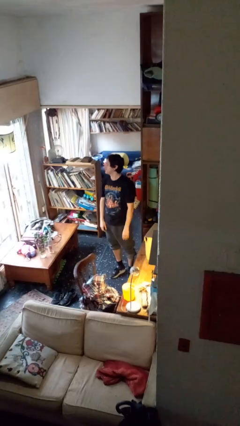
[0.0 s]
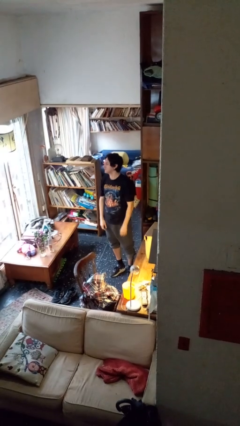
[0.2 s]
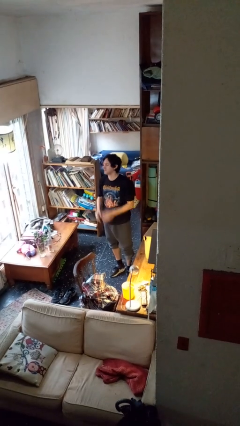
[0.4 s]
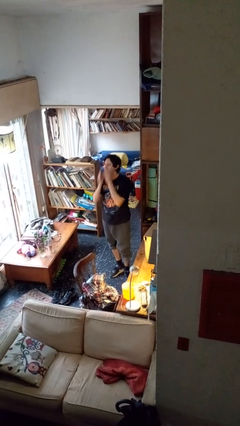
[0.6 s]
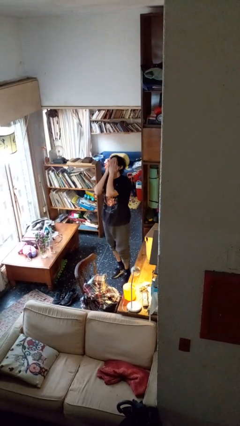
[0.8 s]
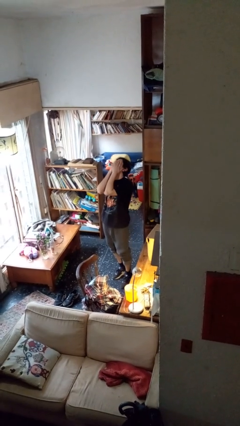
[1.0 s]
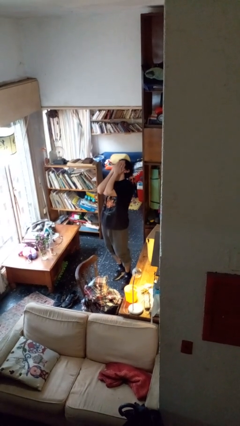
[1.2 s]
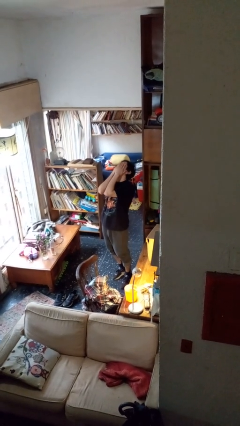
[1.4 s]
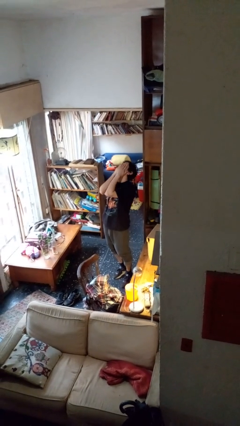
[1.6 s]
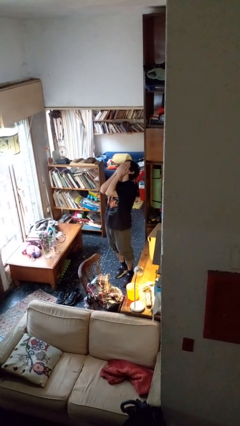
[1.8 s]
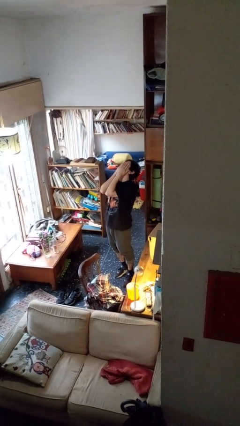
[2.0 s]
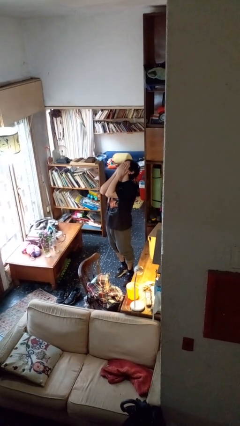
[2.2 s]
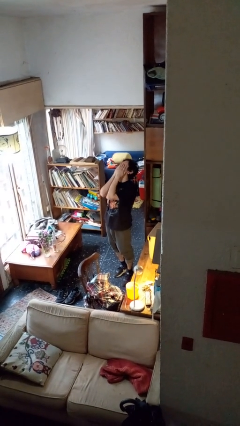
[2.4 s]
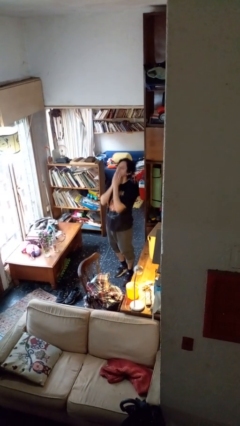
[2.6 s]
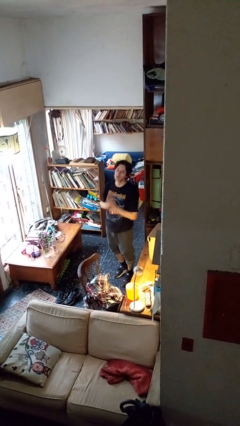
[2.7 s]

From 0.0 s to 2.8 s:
person covers face with hands

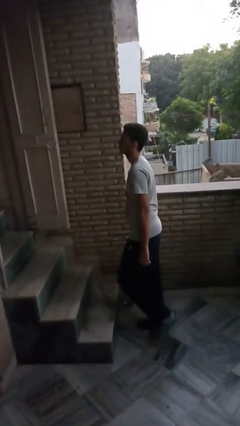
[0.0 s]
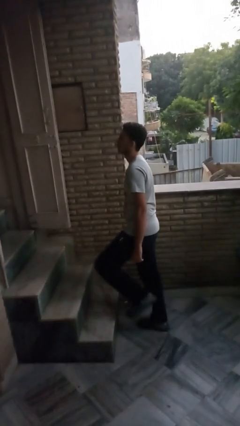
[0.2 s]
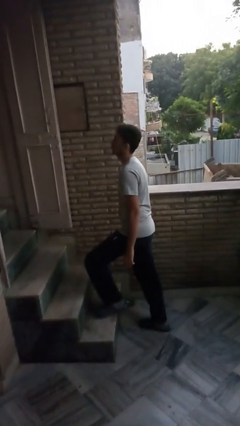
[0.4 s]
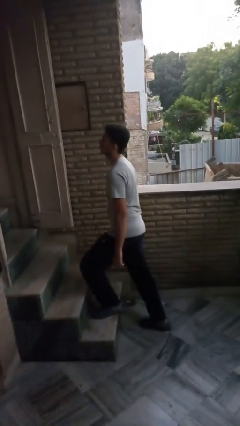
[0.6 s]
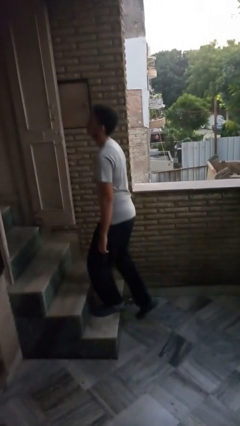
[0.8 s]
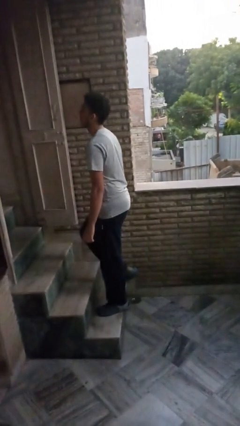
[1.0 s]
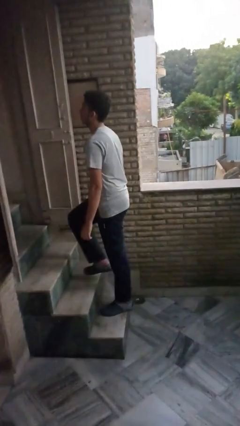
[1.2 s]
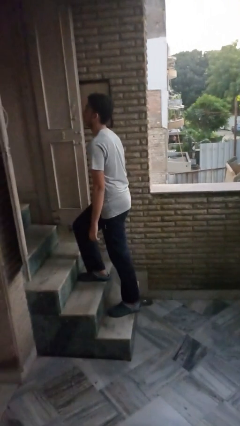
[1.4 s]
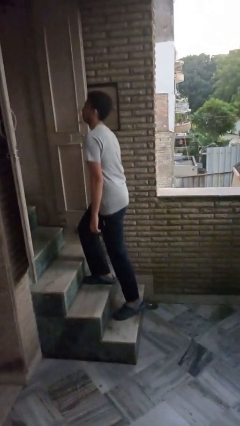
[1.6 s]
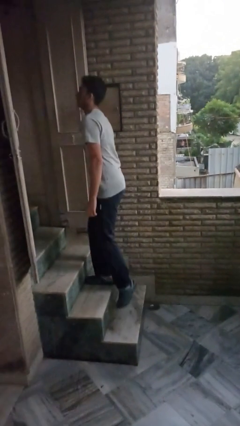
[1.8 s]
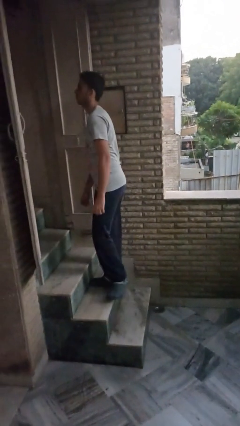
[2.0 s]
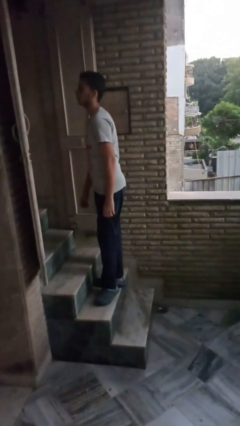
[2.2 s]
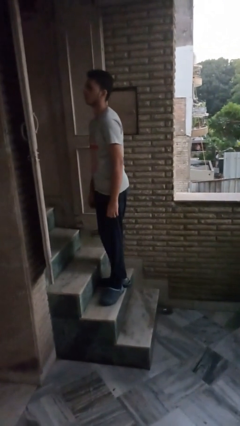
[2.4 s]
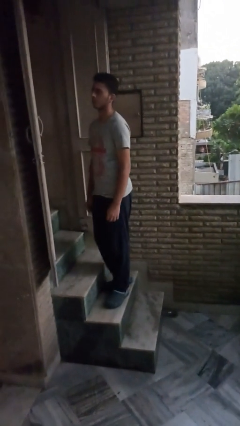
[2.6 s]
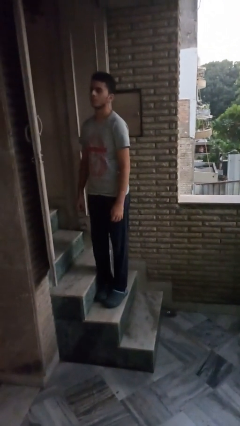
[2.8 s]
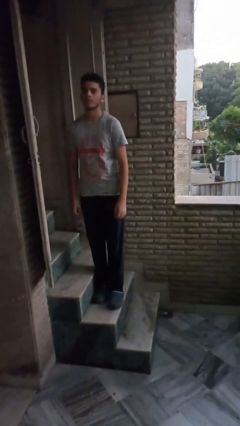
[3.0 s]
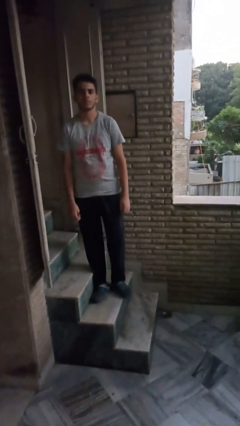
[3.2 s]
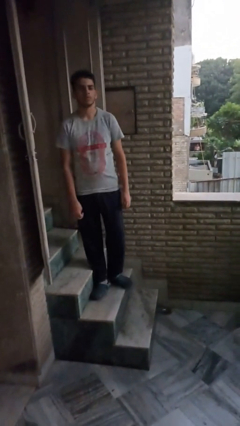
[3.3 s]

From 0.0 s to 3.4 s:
person climbs up stairs

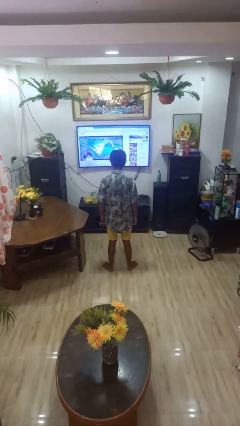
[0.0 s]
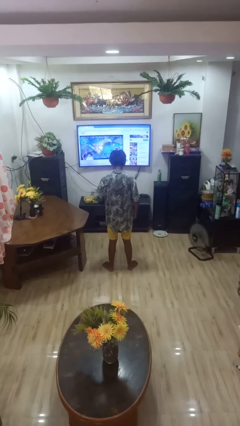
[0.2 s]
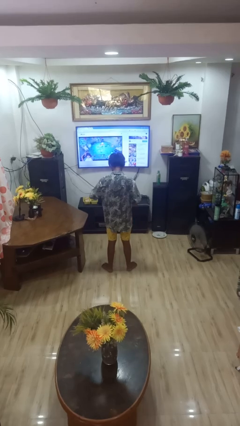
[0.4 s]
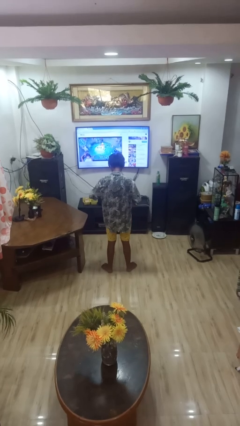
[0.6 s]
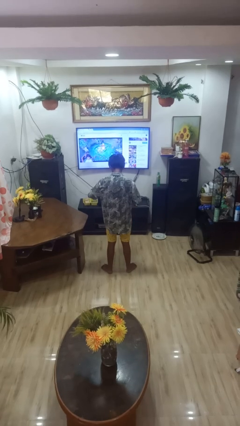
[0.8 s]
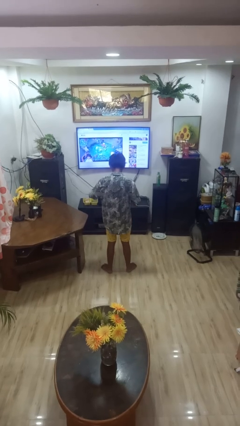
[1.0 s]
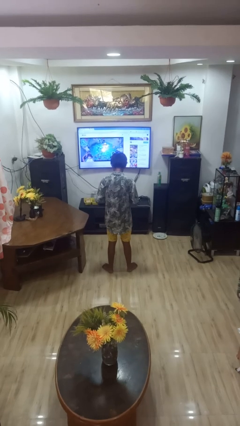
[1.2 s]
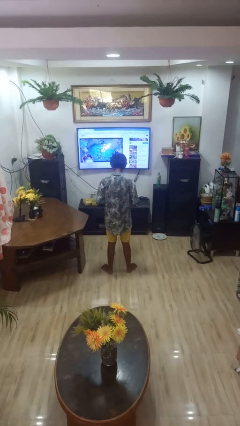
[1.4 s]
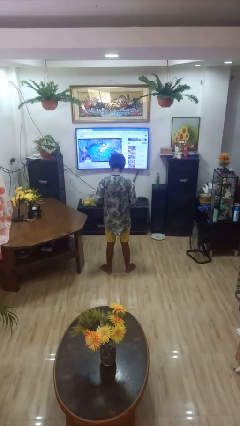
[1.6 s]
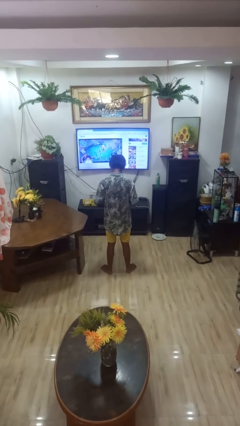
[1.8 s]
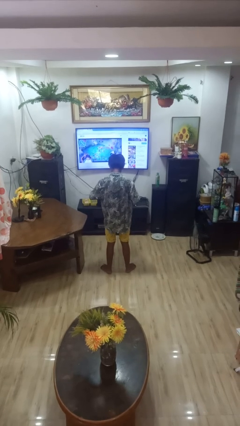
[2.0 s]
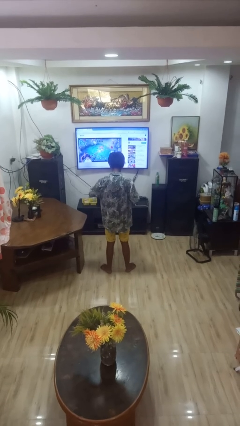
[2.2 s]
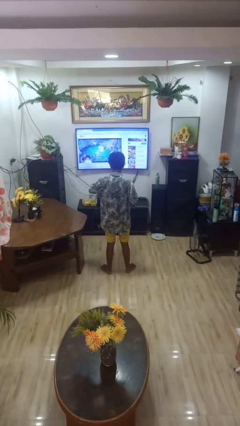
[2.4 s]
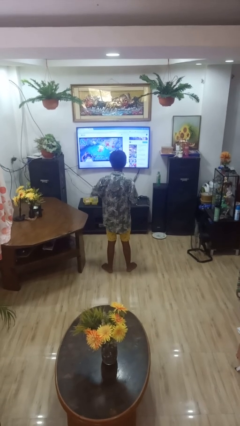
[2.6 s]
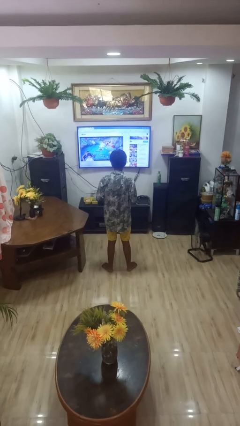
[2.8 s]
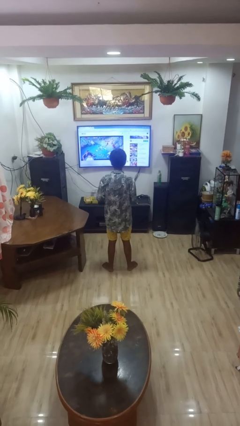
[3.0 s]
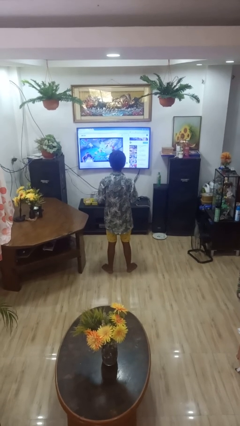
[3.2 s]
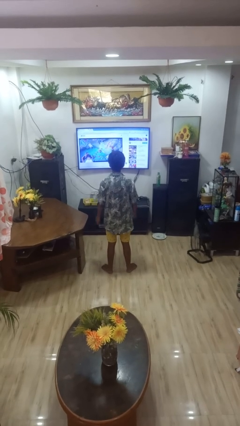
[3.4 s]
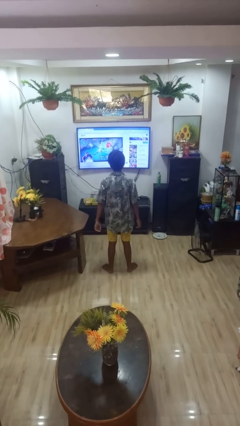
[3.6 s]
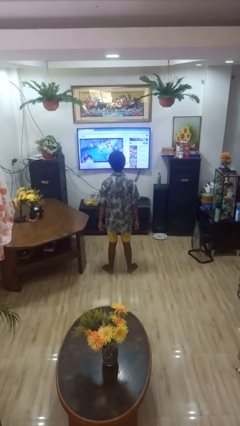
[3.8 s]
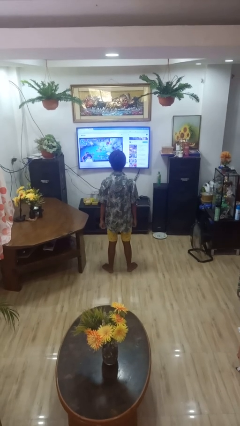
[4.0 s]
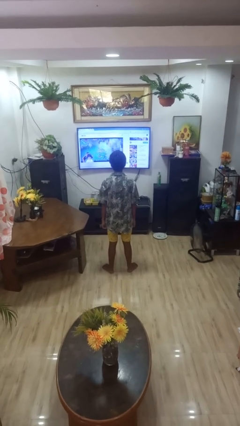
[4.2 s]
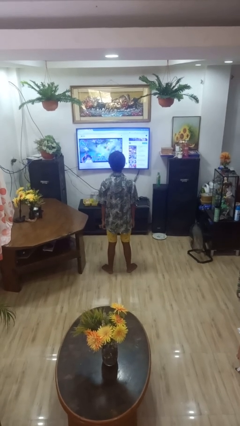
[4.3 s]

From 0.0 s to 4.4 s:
person unbuttons shirt

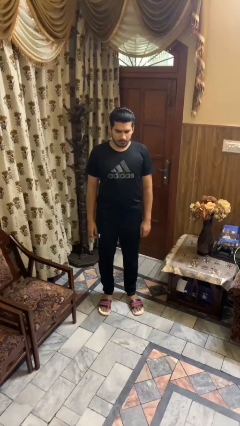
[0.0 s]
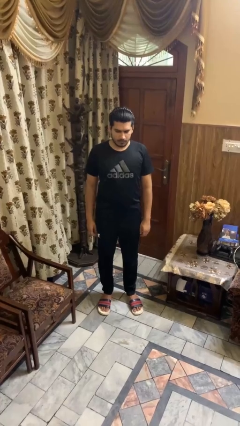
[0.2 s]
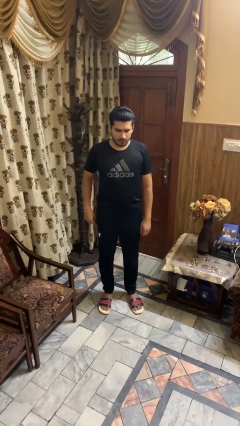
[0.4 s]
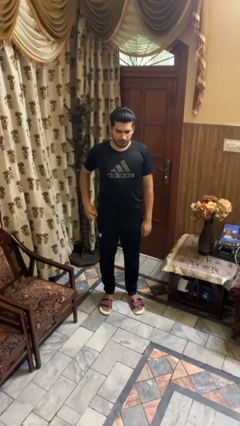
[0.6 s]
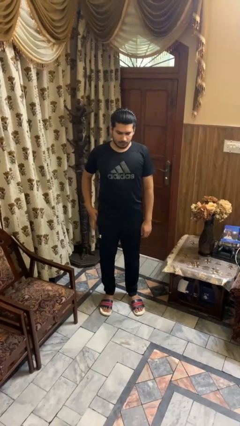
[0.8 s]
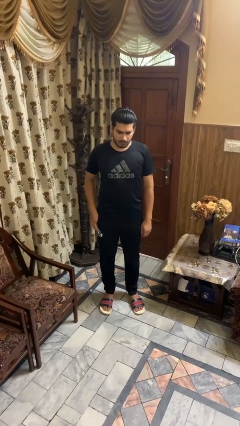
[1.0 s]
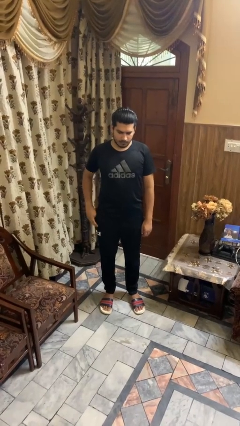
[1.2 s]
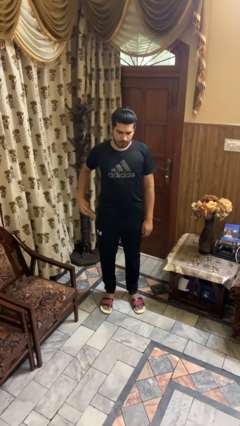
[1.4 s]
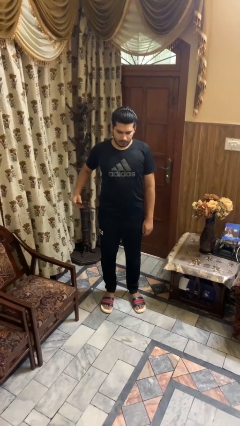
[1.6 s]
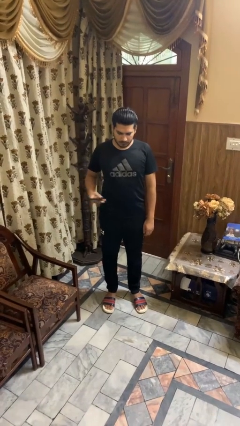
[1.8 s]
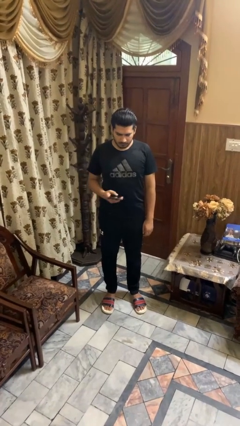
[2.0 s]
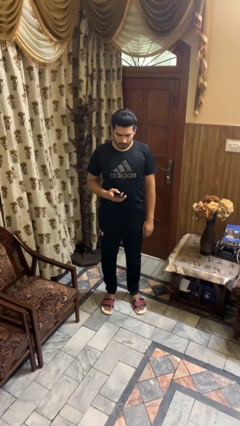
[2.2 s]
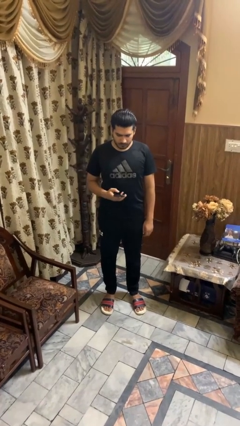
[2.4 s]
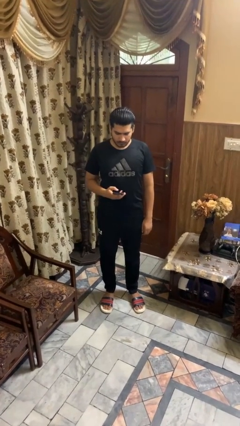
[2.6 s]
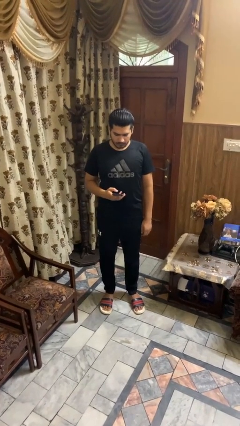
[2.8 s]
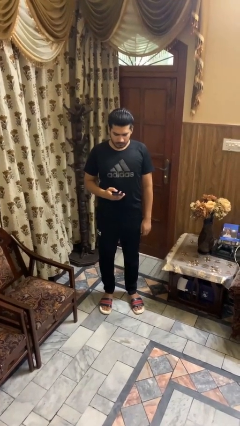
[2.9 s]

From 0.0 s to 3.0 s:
person takes phone from pocket

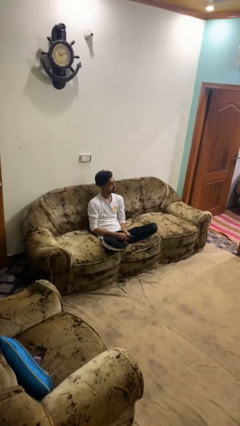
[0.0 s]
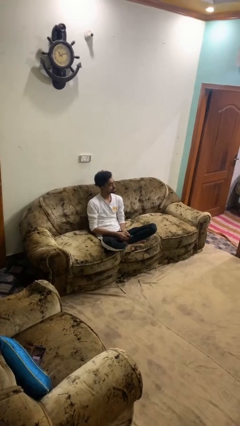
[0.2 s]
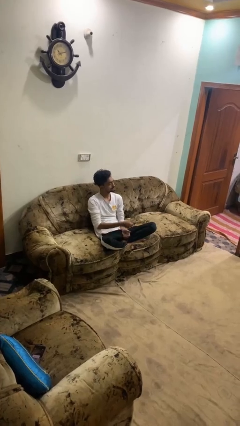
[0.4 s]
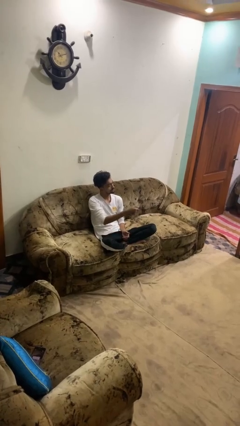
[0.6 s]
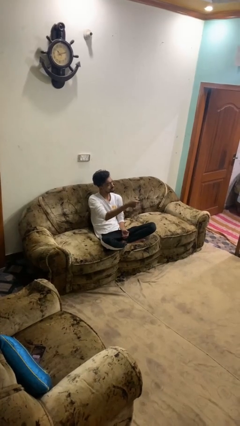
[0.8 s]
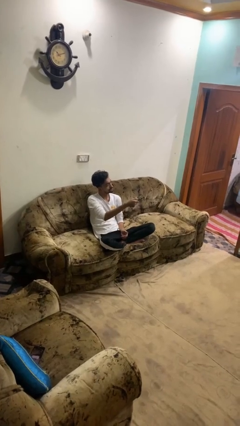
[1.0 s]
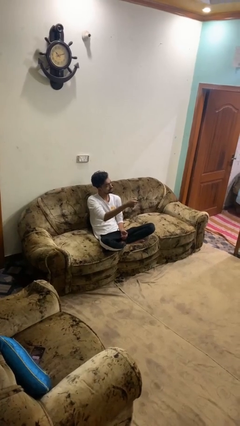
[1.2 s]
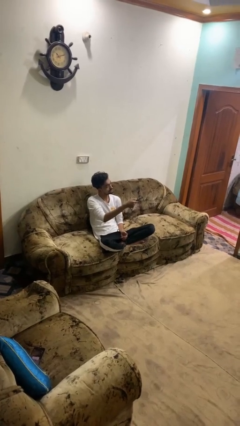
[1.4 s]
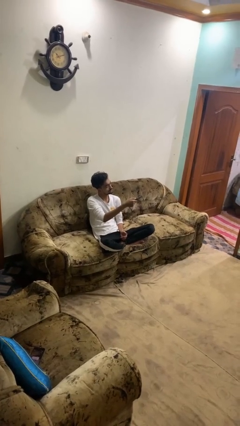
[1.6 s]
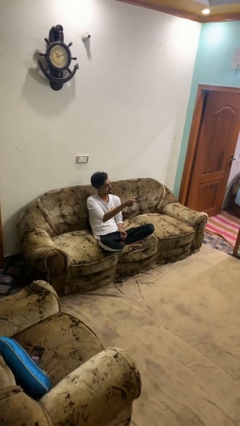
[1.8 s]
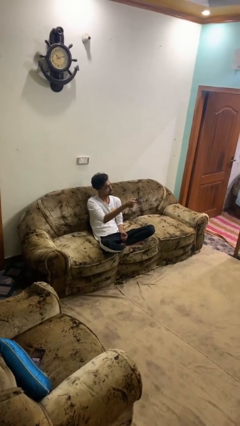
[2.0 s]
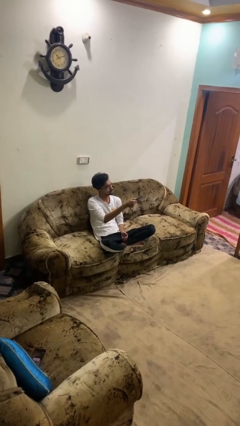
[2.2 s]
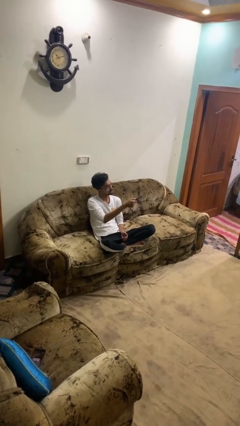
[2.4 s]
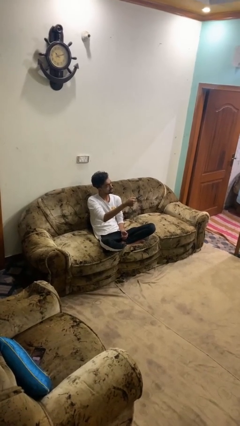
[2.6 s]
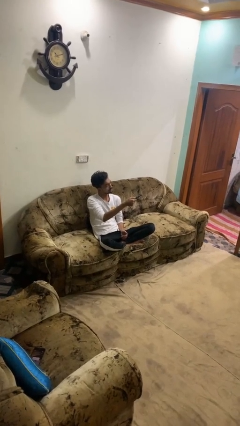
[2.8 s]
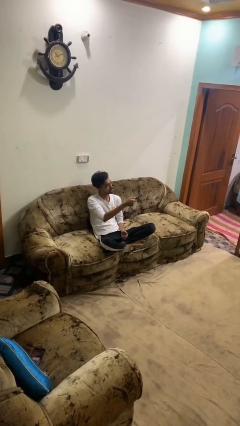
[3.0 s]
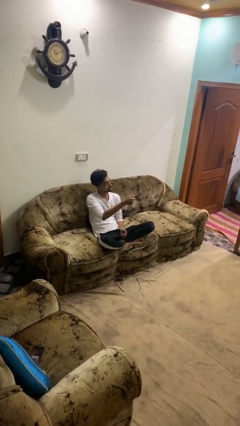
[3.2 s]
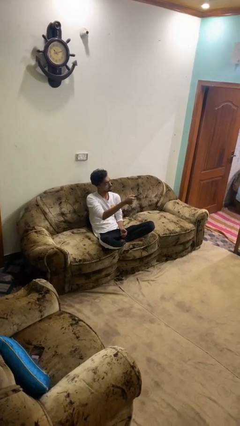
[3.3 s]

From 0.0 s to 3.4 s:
person uses television remote

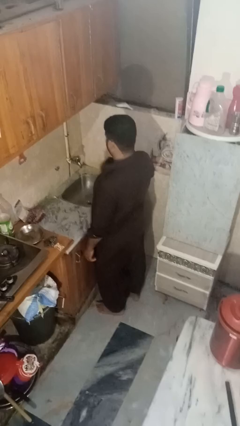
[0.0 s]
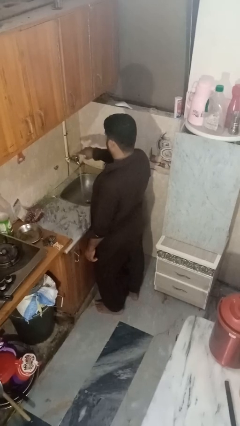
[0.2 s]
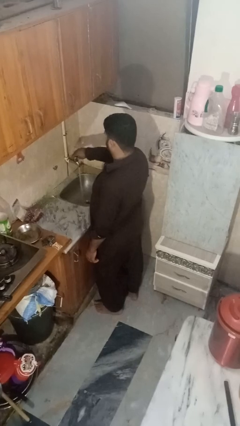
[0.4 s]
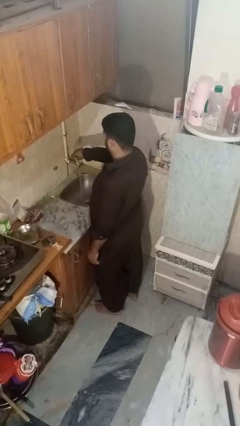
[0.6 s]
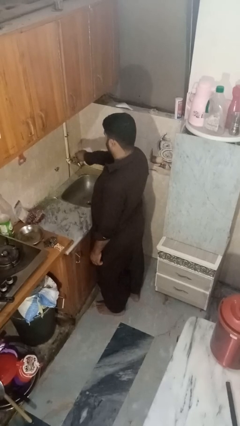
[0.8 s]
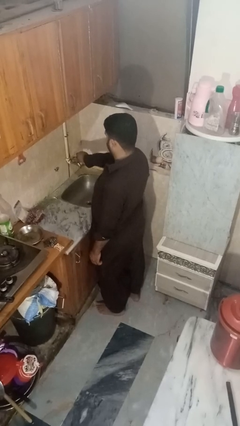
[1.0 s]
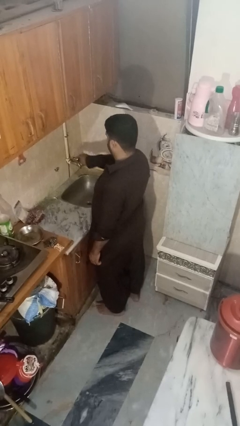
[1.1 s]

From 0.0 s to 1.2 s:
person turns on faucet
